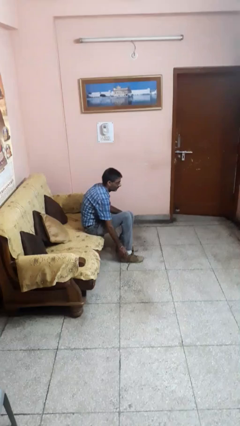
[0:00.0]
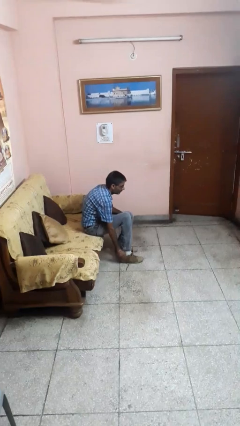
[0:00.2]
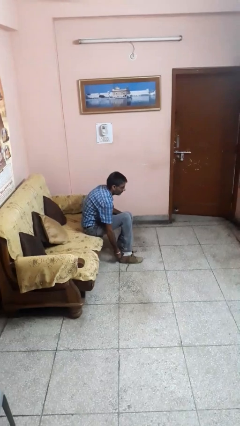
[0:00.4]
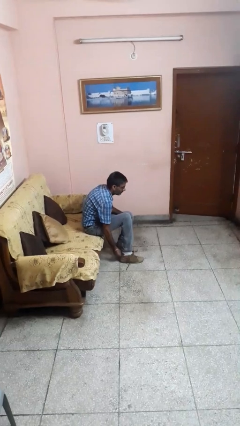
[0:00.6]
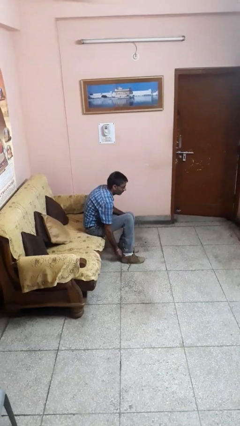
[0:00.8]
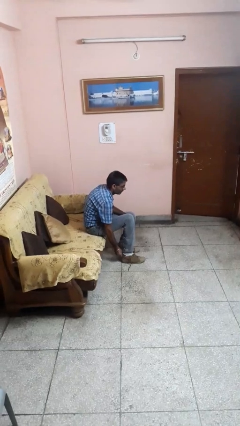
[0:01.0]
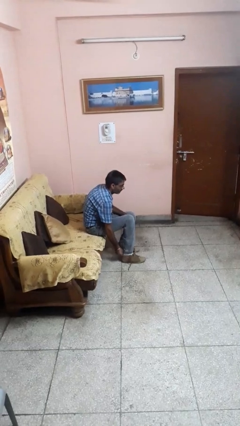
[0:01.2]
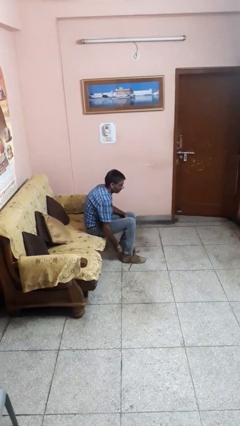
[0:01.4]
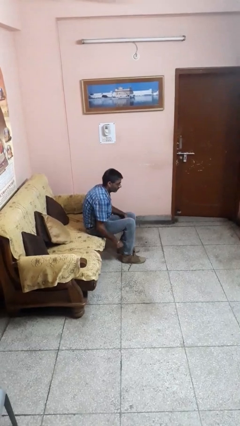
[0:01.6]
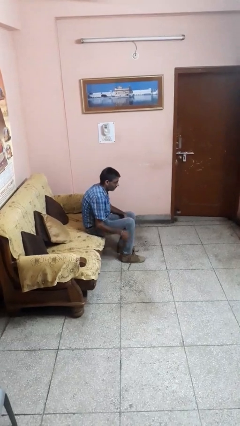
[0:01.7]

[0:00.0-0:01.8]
person puts on shoes

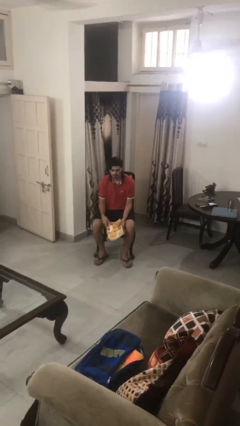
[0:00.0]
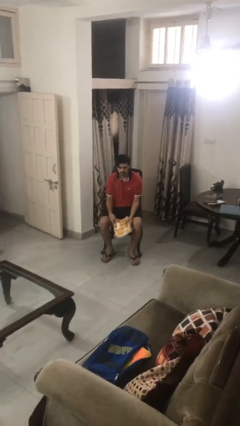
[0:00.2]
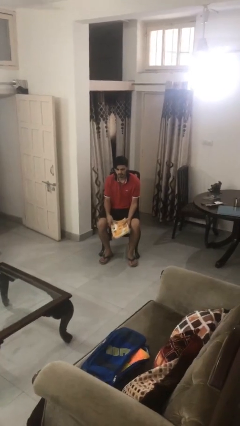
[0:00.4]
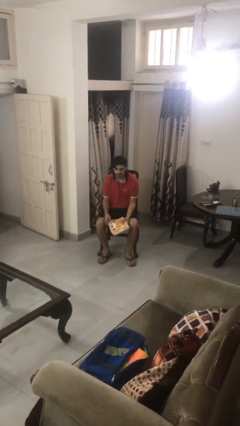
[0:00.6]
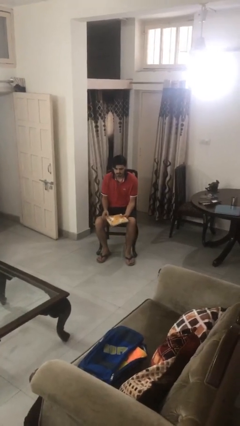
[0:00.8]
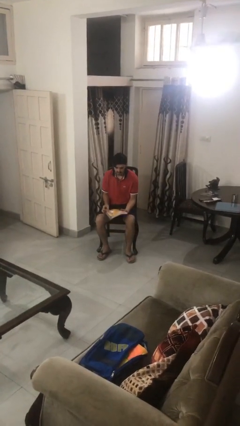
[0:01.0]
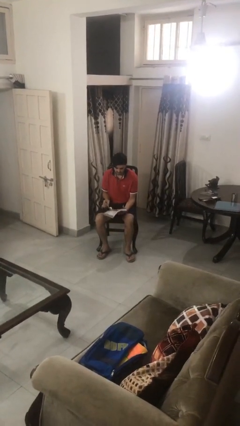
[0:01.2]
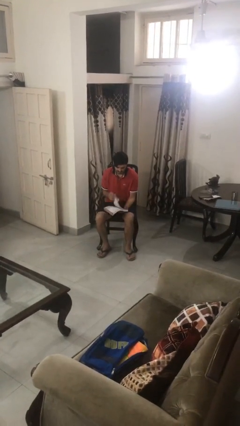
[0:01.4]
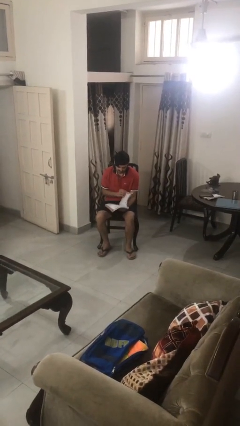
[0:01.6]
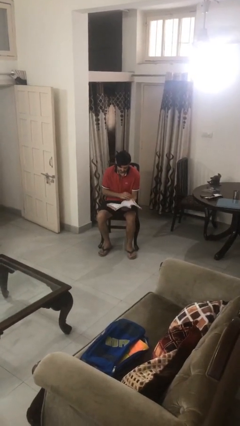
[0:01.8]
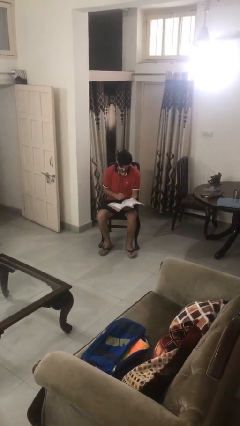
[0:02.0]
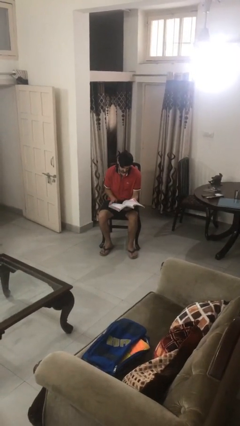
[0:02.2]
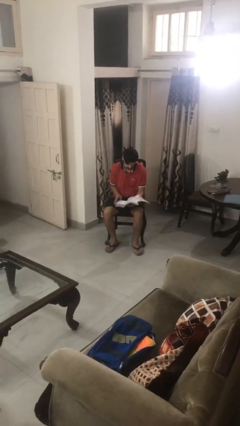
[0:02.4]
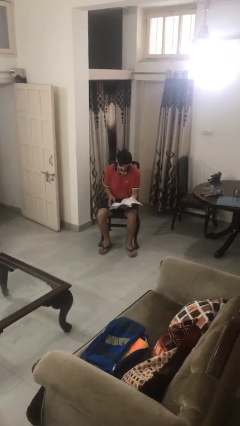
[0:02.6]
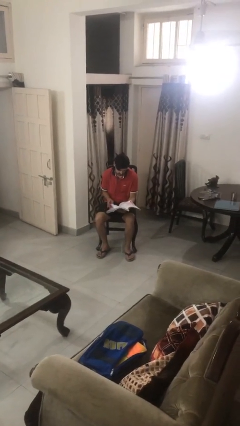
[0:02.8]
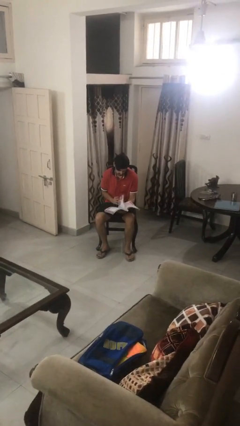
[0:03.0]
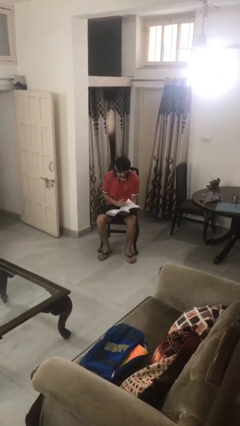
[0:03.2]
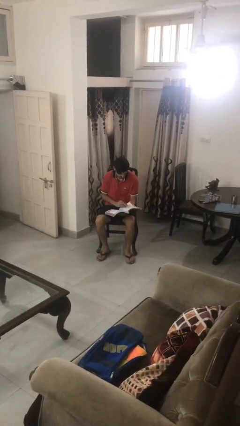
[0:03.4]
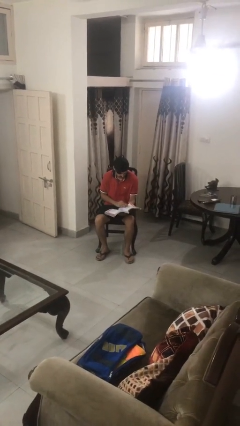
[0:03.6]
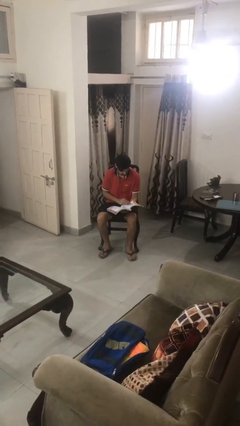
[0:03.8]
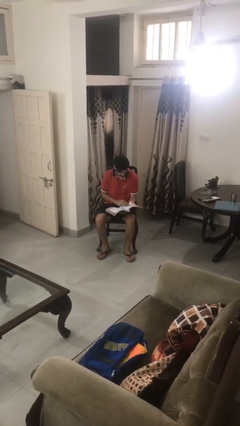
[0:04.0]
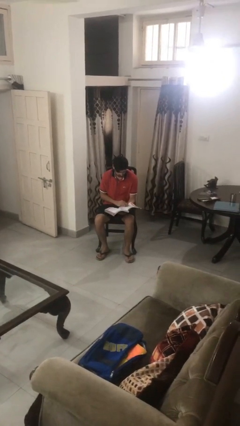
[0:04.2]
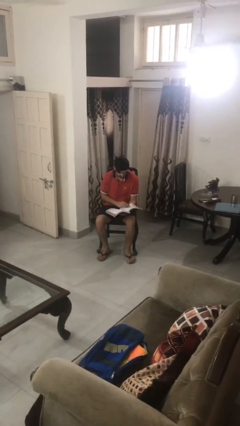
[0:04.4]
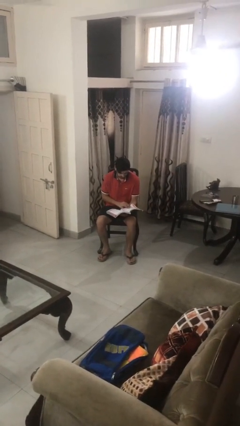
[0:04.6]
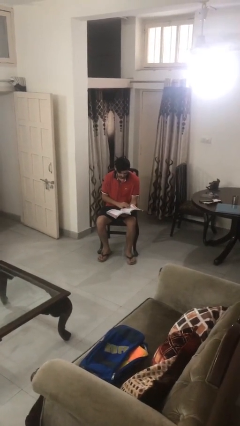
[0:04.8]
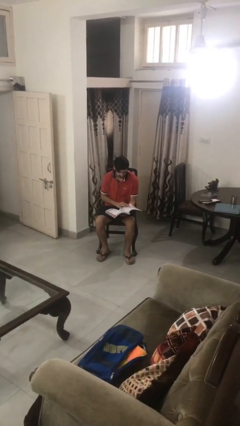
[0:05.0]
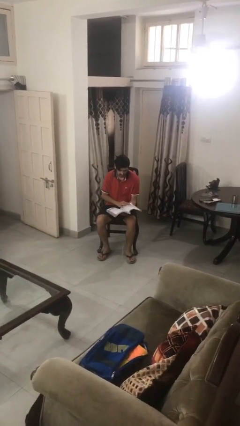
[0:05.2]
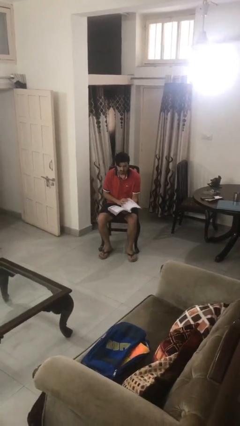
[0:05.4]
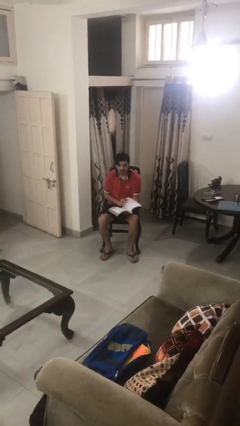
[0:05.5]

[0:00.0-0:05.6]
person reads book

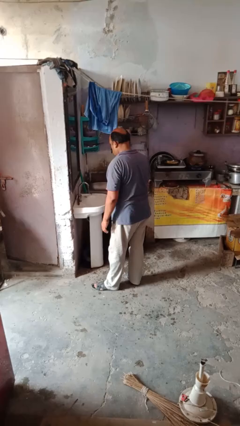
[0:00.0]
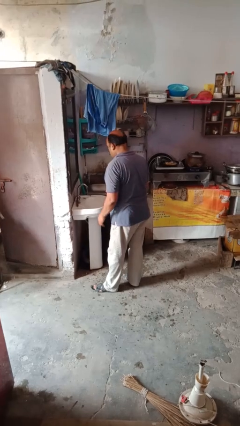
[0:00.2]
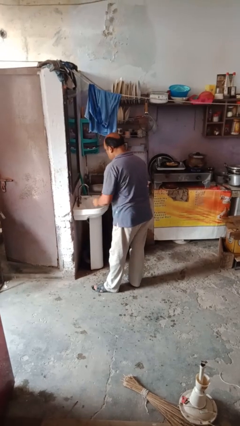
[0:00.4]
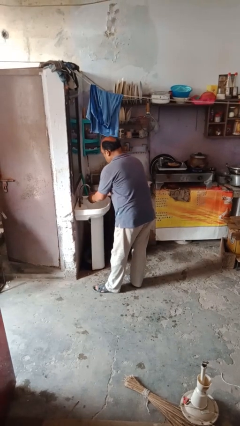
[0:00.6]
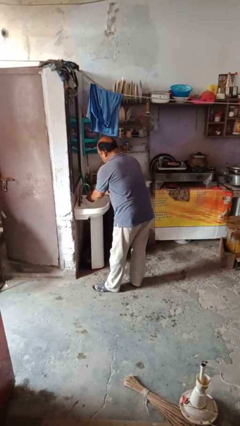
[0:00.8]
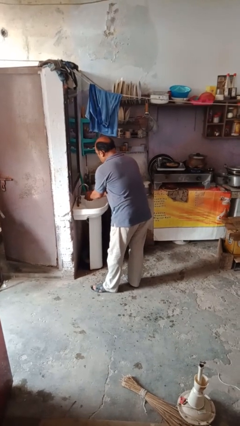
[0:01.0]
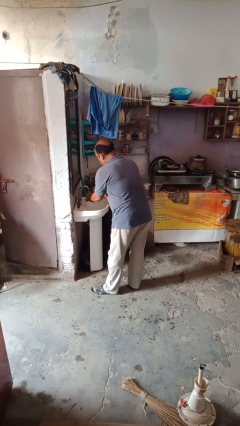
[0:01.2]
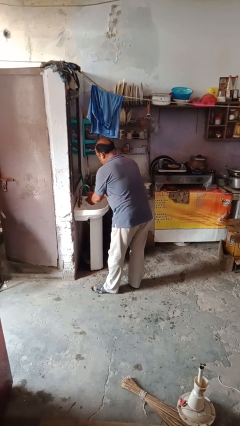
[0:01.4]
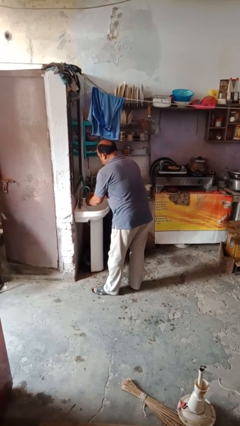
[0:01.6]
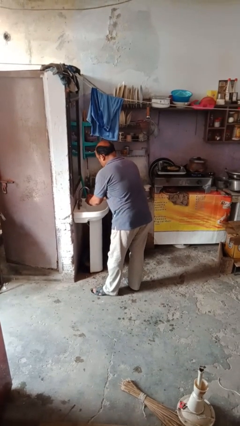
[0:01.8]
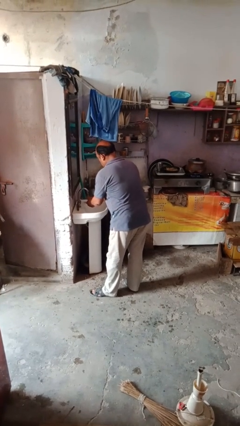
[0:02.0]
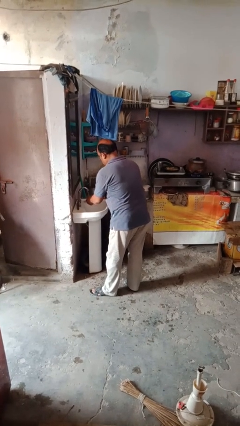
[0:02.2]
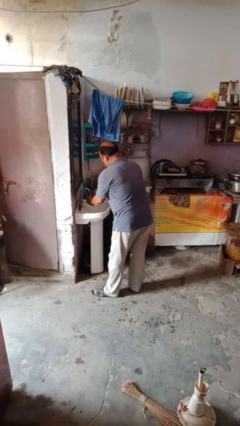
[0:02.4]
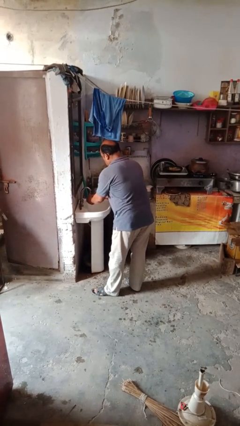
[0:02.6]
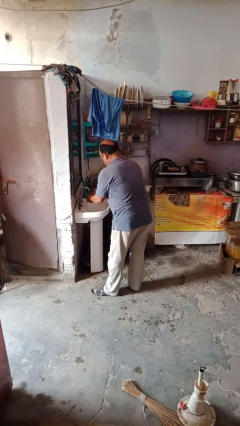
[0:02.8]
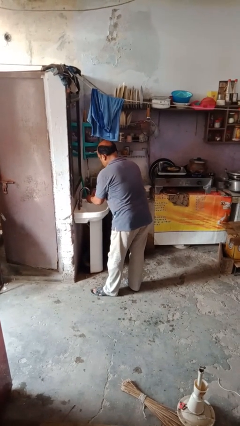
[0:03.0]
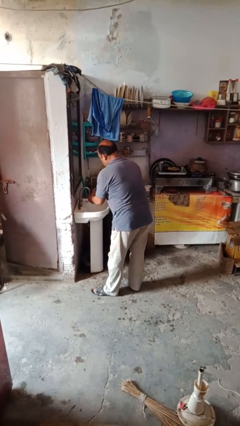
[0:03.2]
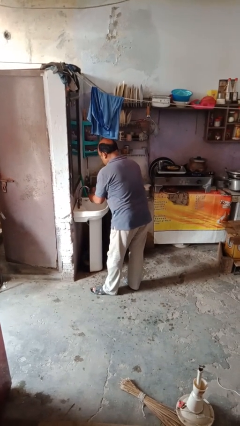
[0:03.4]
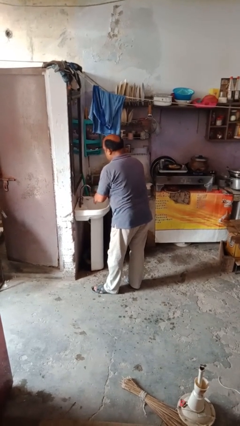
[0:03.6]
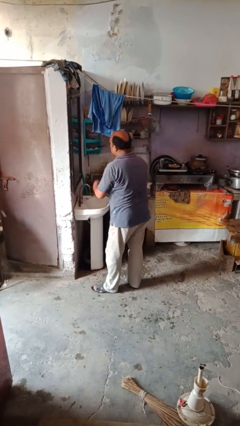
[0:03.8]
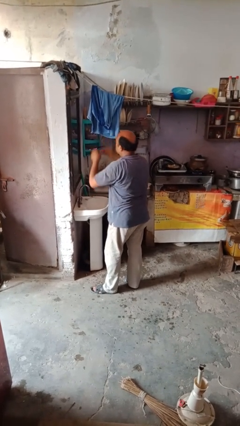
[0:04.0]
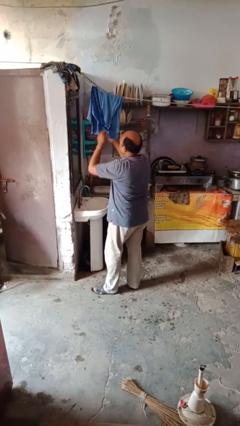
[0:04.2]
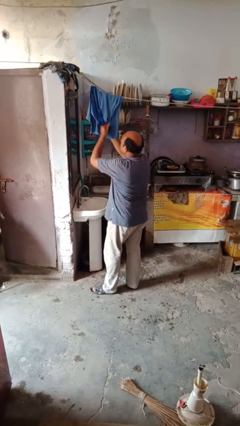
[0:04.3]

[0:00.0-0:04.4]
person washes hands

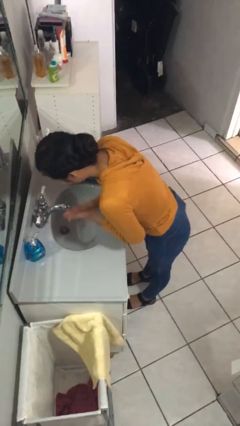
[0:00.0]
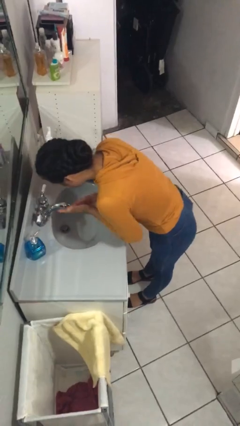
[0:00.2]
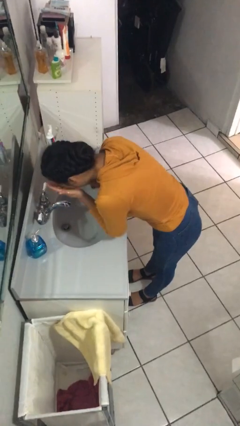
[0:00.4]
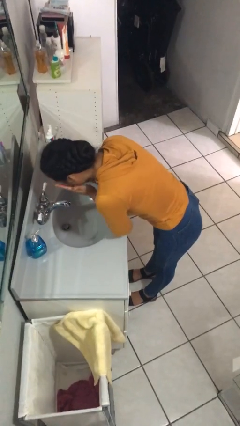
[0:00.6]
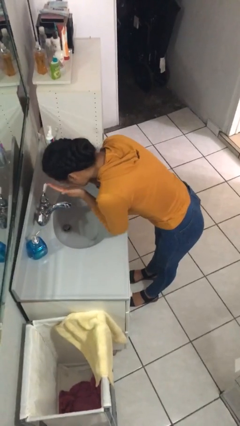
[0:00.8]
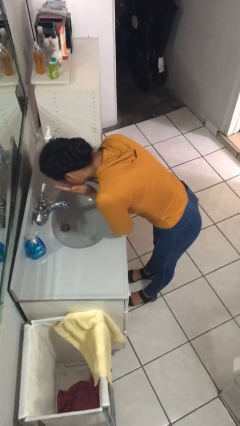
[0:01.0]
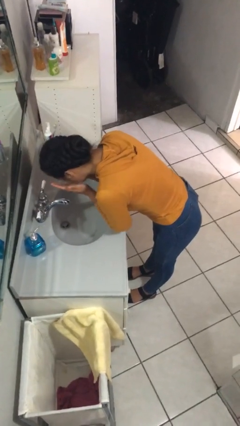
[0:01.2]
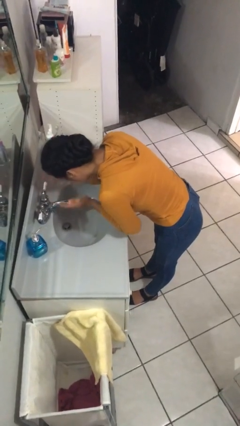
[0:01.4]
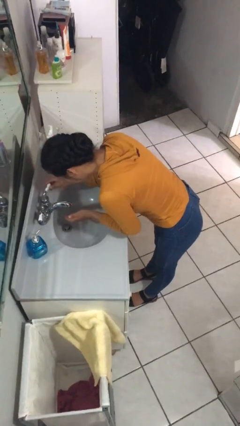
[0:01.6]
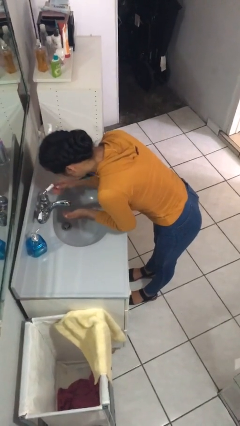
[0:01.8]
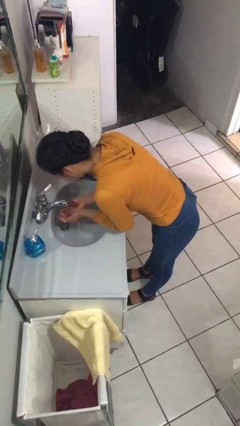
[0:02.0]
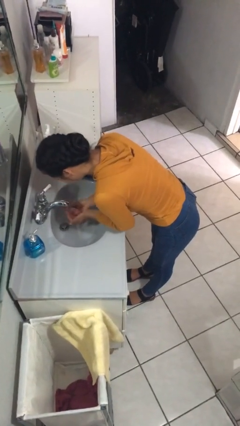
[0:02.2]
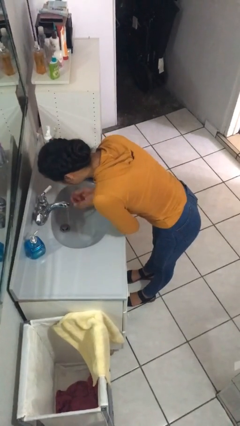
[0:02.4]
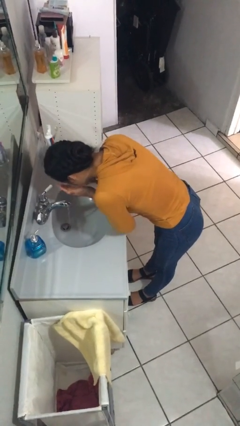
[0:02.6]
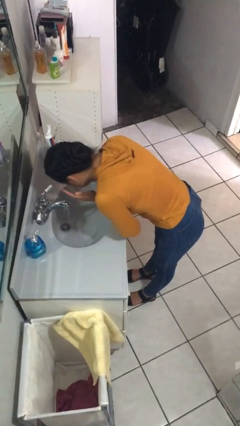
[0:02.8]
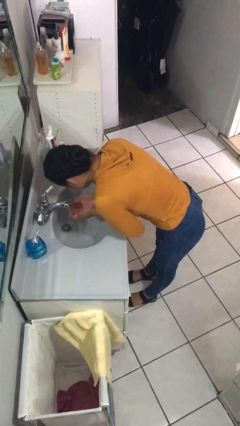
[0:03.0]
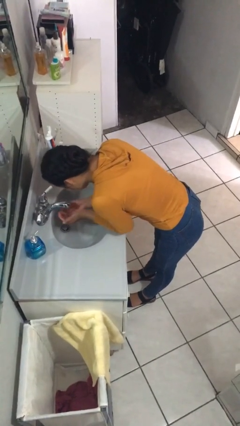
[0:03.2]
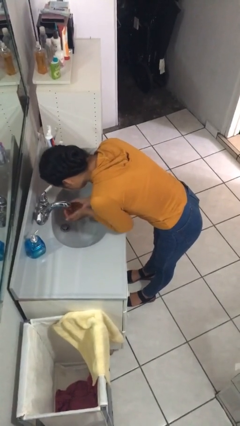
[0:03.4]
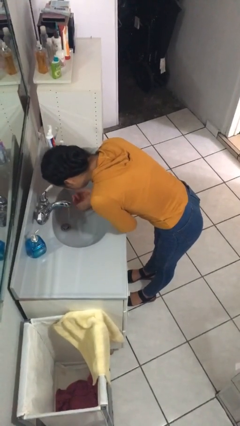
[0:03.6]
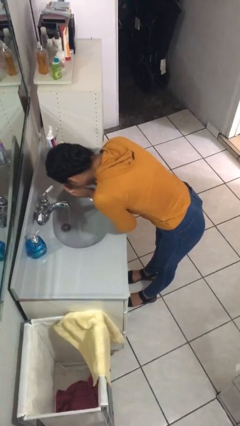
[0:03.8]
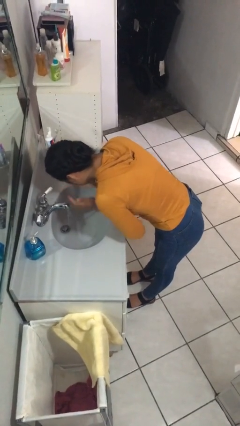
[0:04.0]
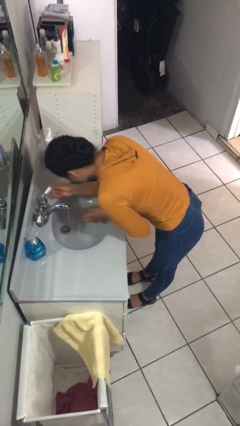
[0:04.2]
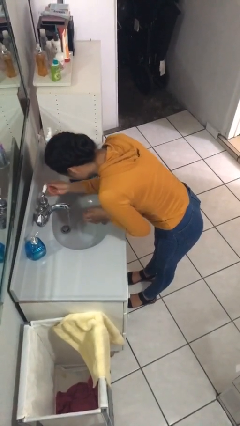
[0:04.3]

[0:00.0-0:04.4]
person washes face

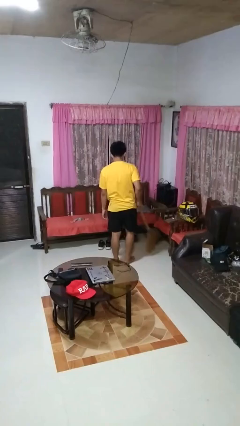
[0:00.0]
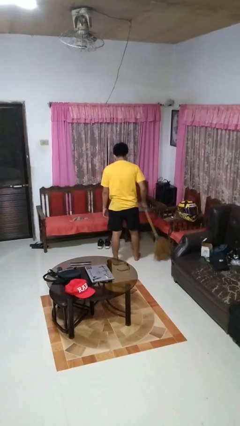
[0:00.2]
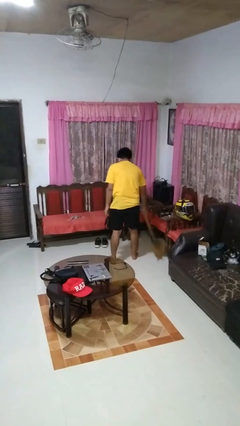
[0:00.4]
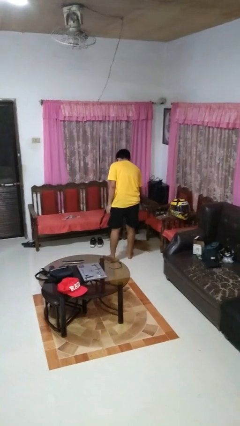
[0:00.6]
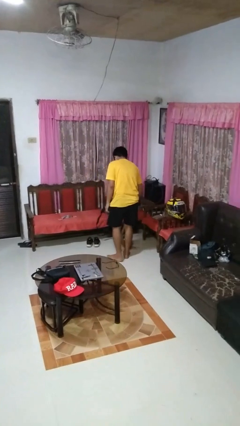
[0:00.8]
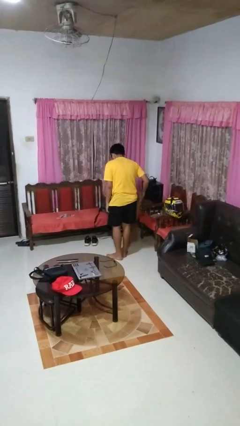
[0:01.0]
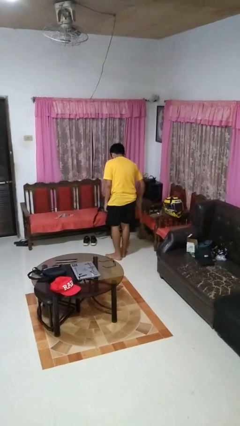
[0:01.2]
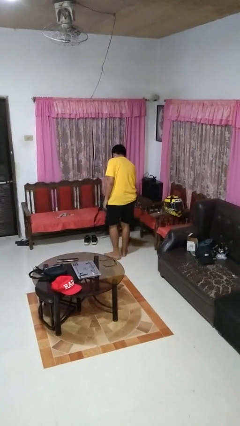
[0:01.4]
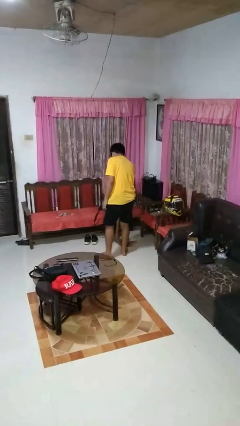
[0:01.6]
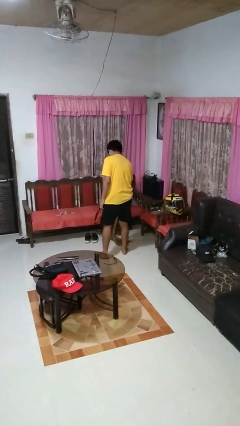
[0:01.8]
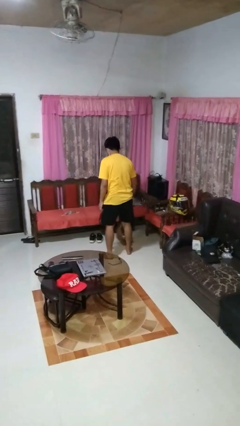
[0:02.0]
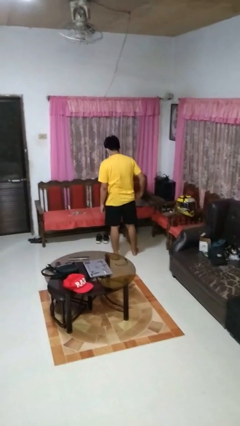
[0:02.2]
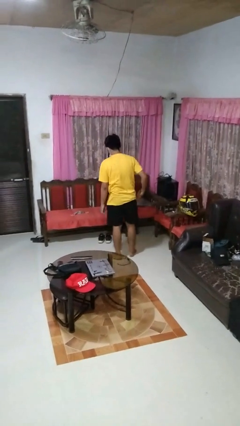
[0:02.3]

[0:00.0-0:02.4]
person sweeps floor
